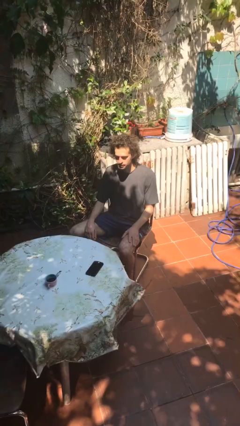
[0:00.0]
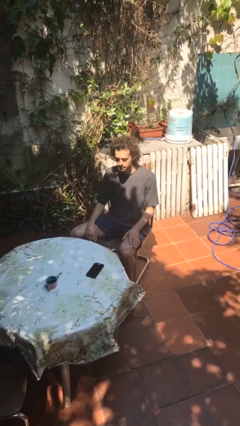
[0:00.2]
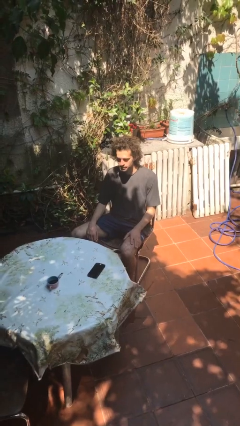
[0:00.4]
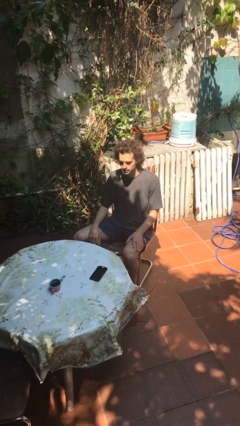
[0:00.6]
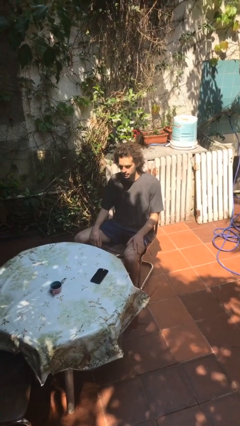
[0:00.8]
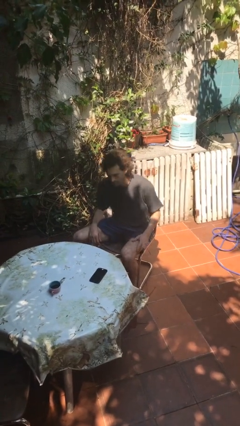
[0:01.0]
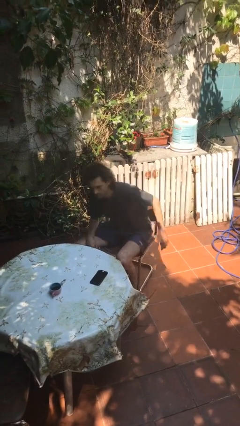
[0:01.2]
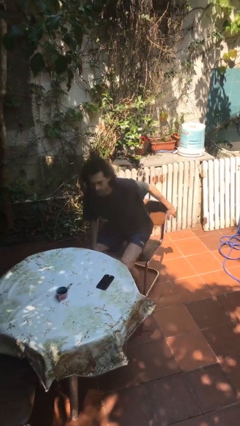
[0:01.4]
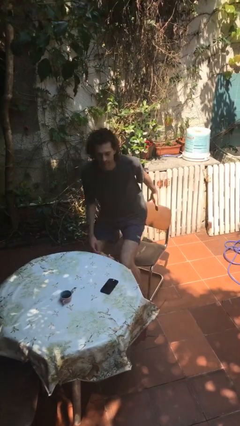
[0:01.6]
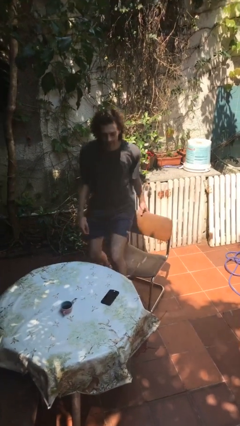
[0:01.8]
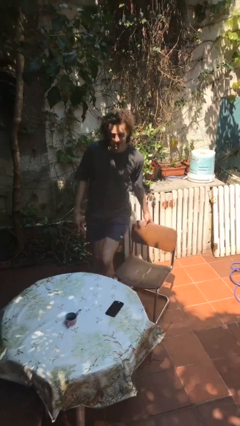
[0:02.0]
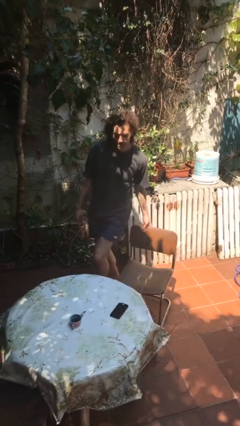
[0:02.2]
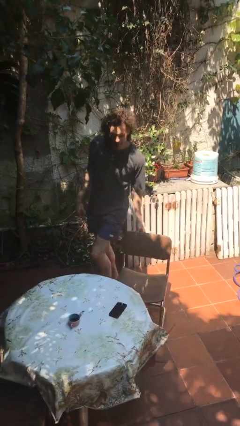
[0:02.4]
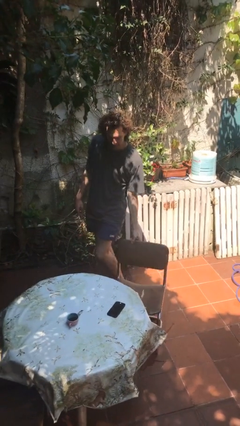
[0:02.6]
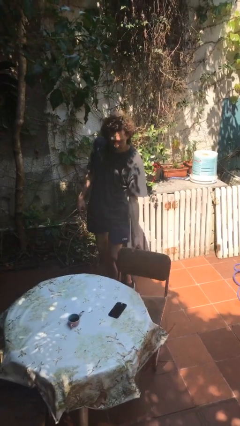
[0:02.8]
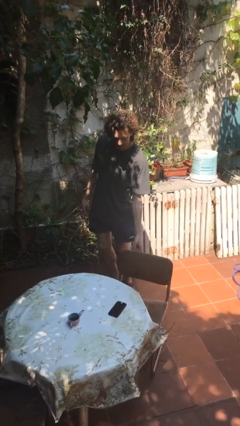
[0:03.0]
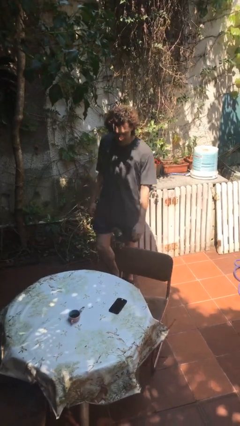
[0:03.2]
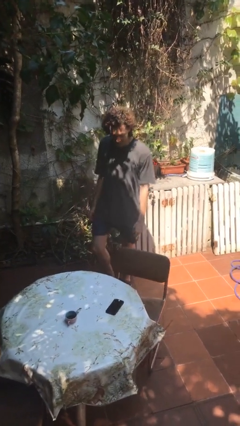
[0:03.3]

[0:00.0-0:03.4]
person stands up

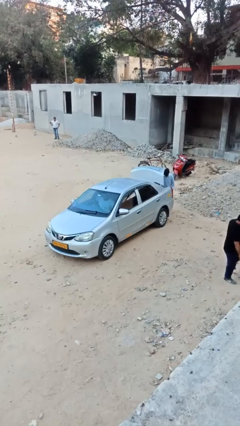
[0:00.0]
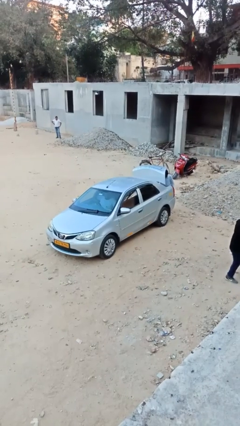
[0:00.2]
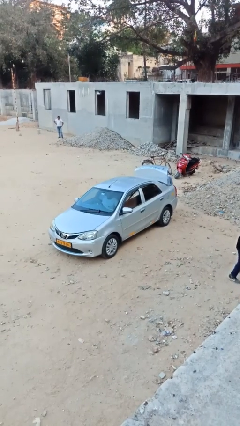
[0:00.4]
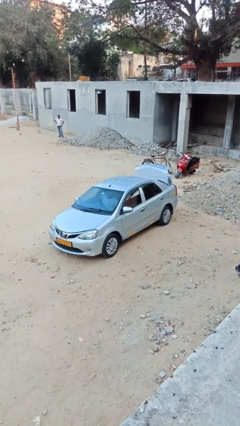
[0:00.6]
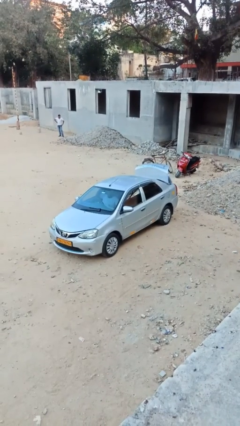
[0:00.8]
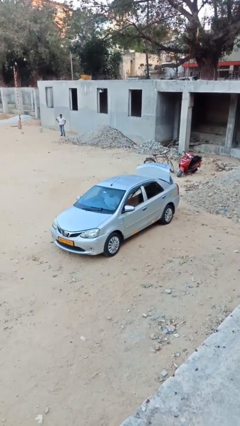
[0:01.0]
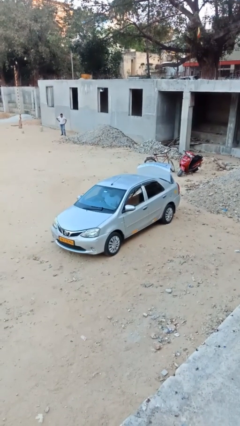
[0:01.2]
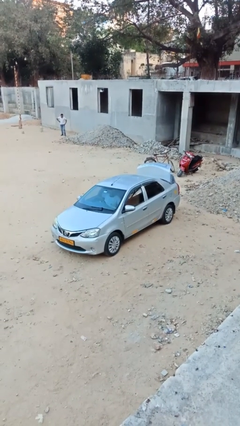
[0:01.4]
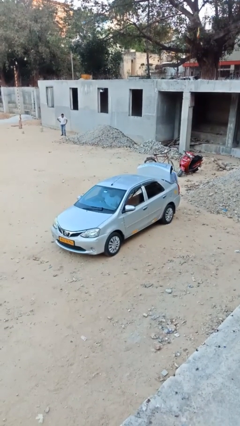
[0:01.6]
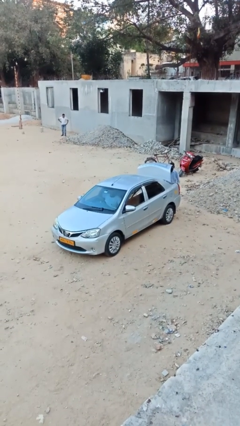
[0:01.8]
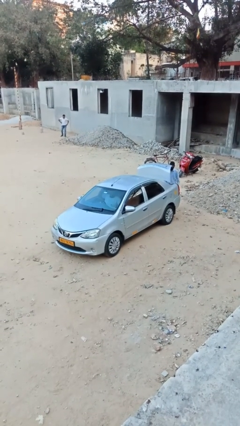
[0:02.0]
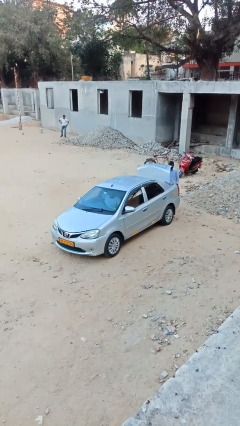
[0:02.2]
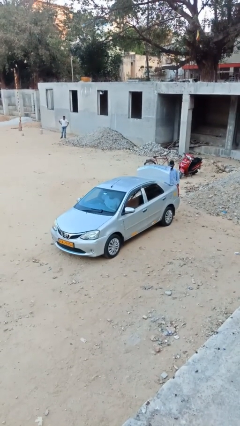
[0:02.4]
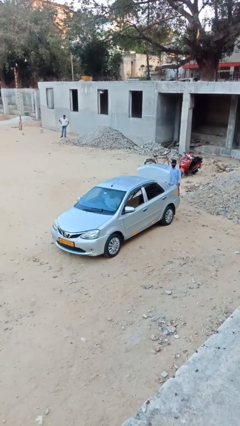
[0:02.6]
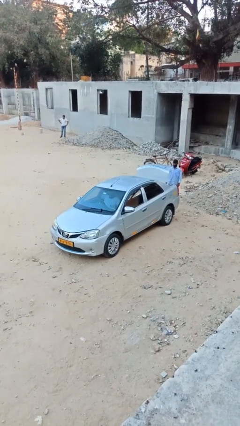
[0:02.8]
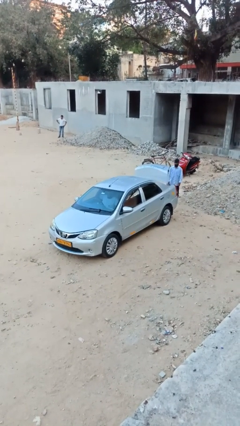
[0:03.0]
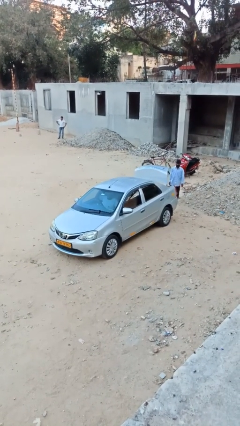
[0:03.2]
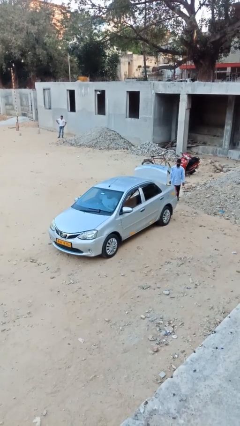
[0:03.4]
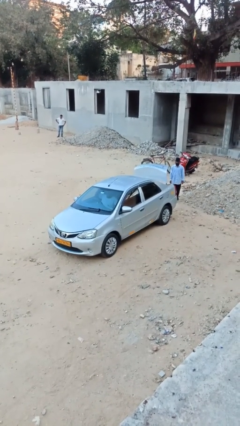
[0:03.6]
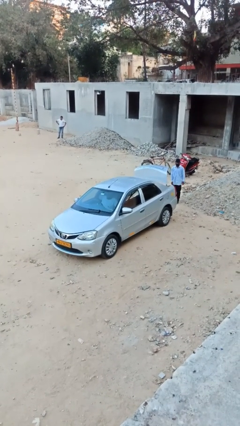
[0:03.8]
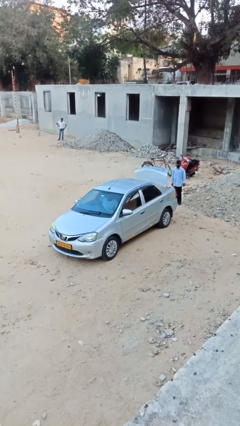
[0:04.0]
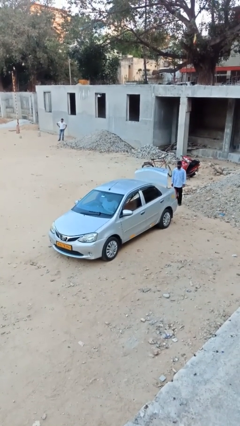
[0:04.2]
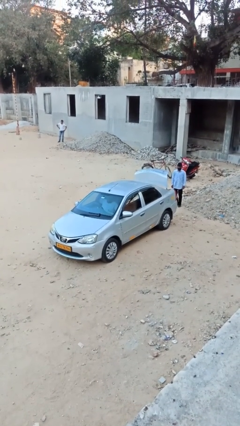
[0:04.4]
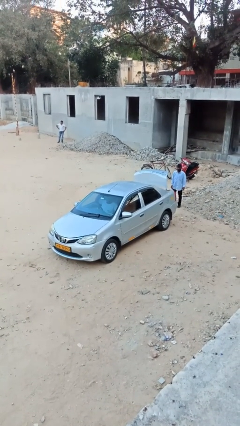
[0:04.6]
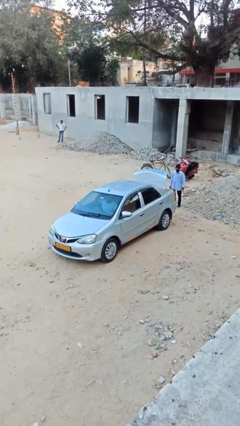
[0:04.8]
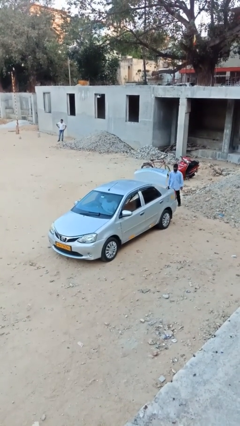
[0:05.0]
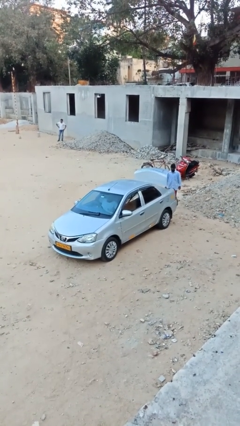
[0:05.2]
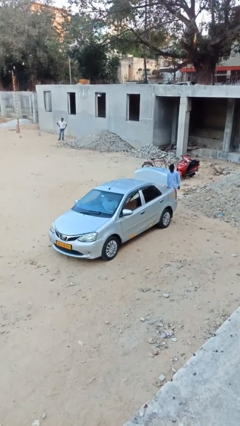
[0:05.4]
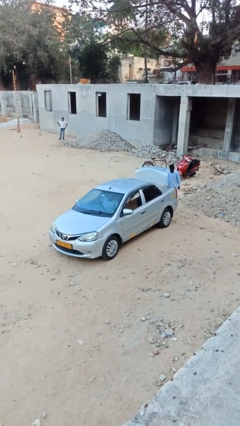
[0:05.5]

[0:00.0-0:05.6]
person loads car

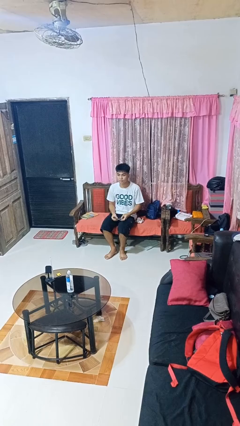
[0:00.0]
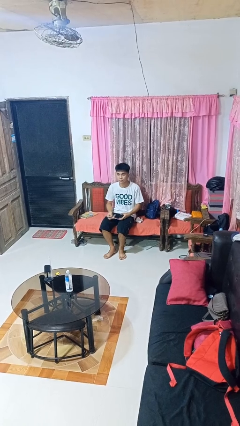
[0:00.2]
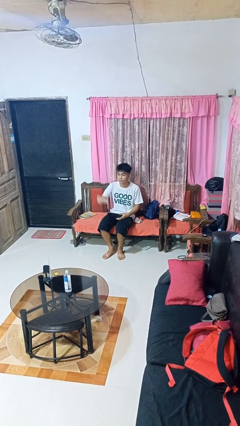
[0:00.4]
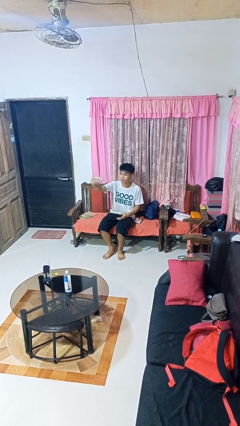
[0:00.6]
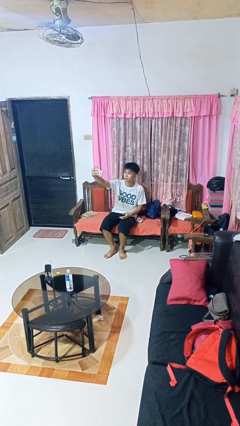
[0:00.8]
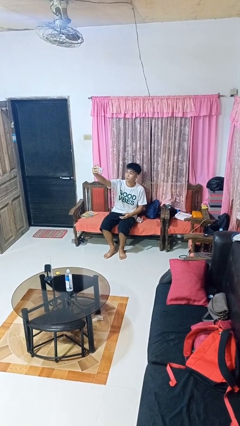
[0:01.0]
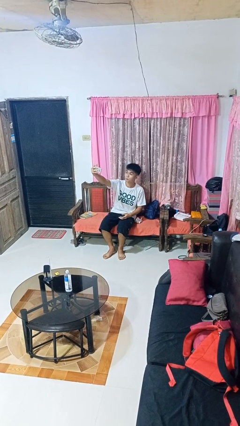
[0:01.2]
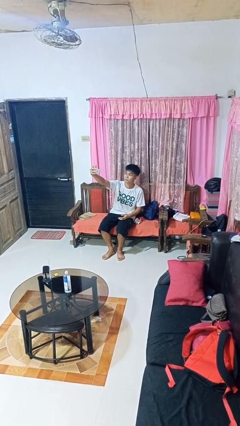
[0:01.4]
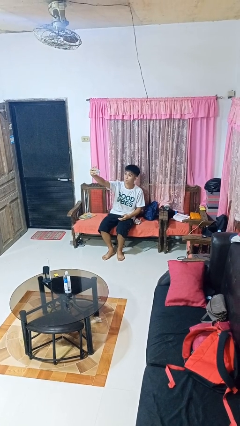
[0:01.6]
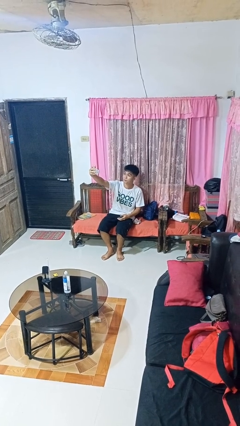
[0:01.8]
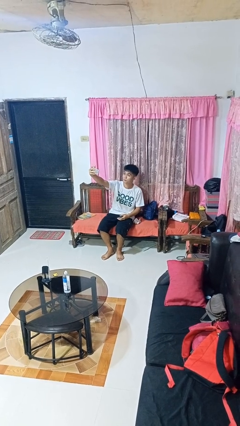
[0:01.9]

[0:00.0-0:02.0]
person takes selfie

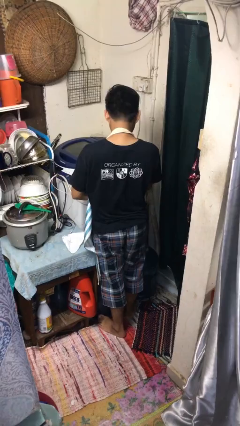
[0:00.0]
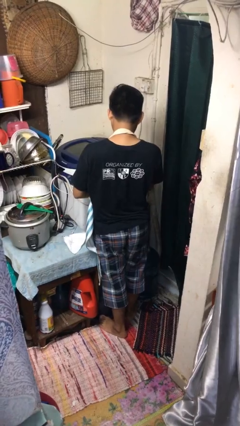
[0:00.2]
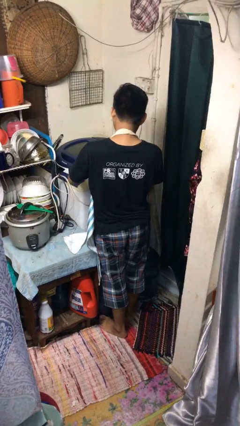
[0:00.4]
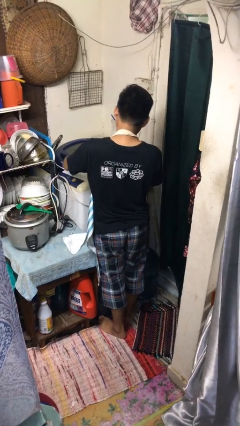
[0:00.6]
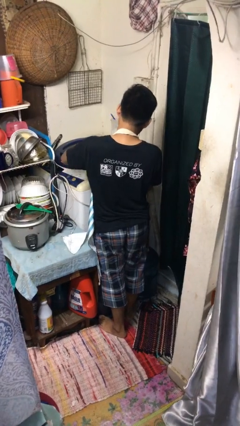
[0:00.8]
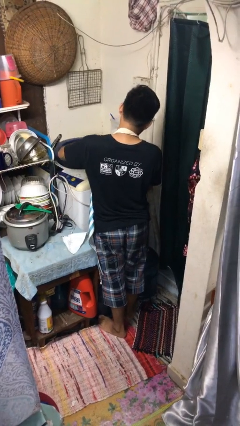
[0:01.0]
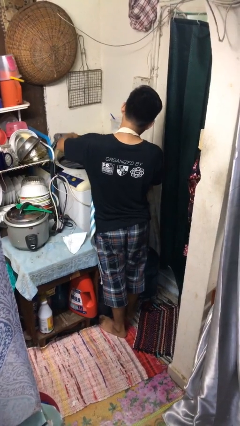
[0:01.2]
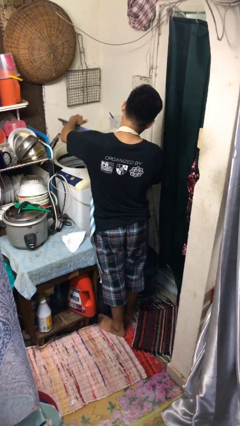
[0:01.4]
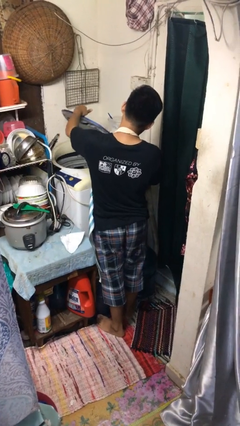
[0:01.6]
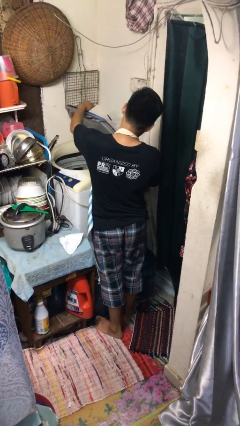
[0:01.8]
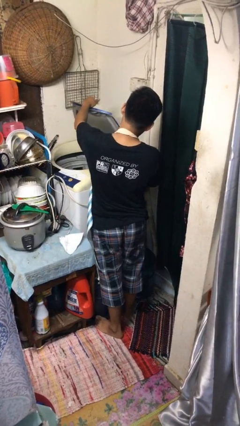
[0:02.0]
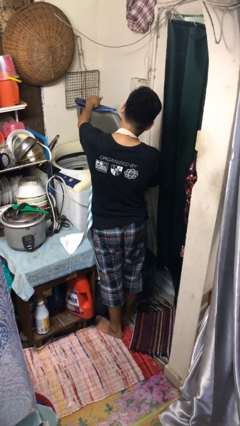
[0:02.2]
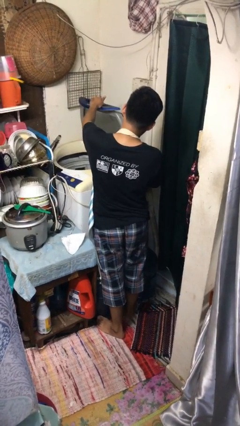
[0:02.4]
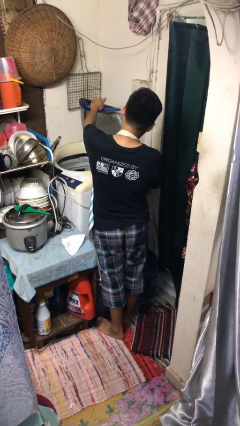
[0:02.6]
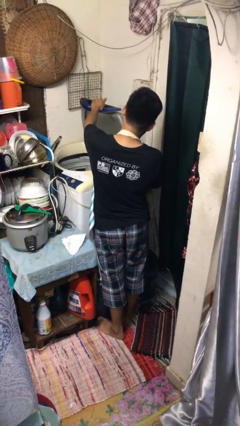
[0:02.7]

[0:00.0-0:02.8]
person opens clothes washer

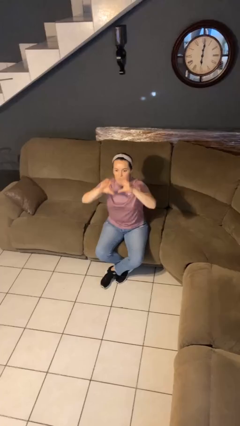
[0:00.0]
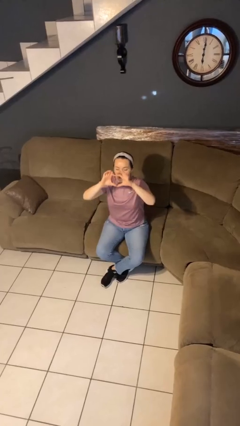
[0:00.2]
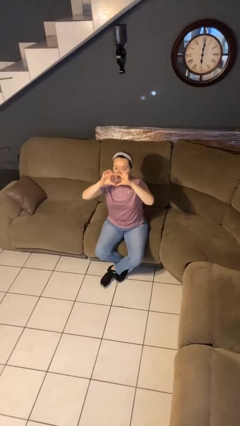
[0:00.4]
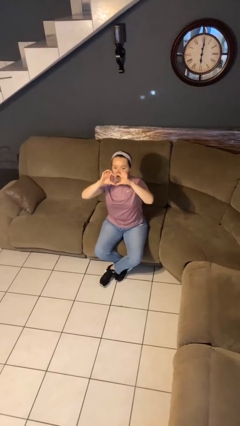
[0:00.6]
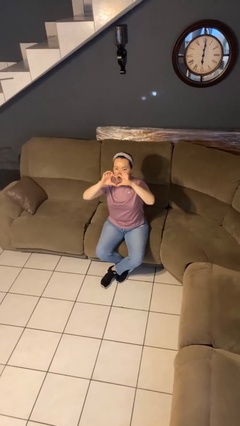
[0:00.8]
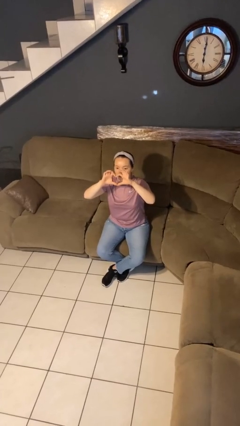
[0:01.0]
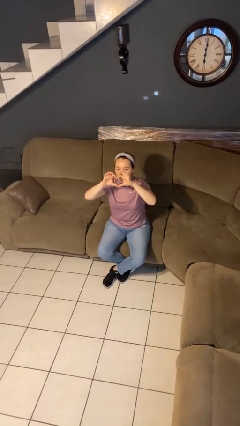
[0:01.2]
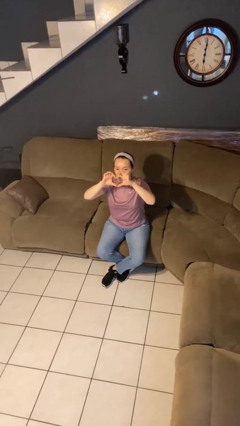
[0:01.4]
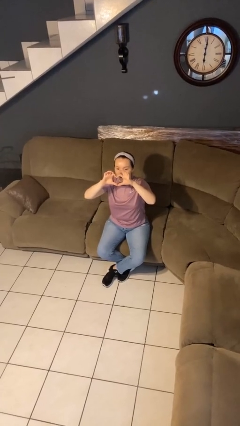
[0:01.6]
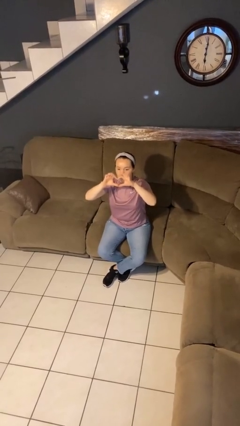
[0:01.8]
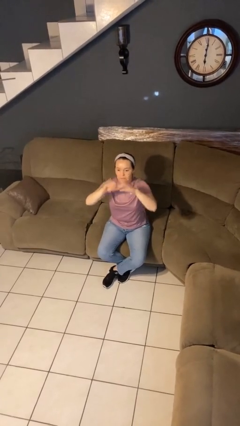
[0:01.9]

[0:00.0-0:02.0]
person gestures heart

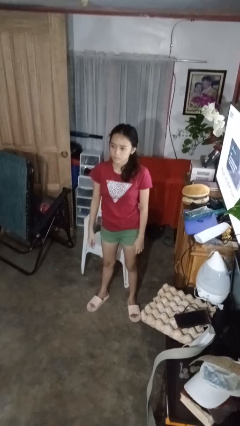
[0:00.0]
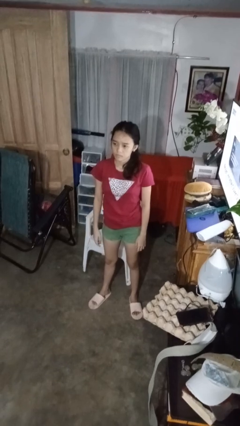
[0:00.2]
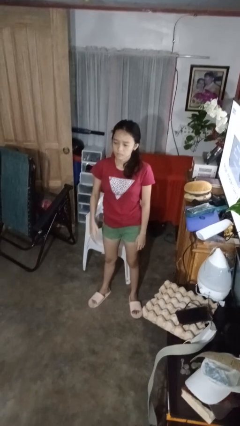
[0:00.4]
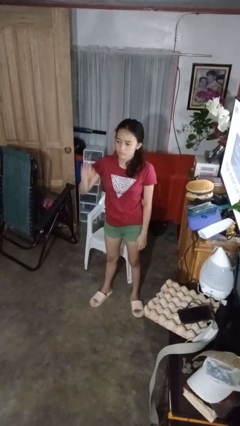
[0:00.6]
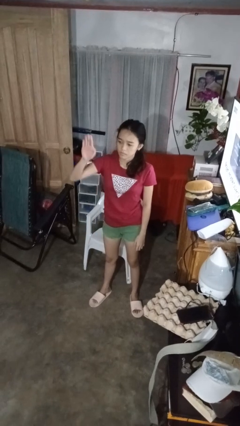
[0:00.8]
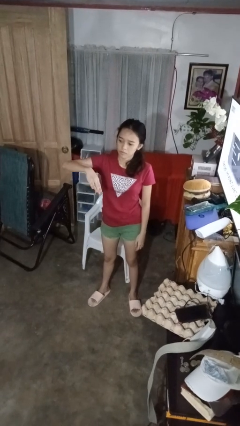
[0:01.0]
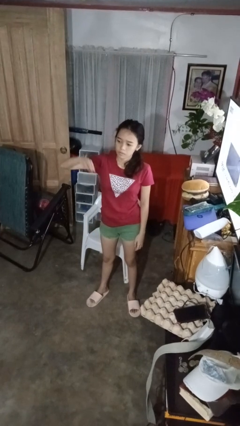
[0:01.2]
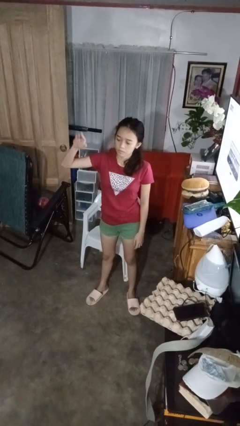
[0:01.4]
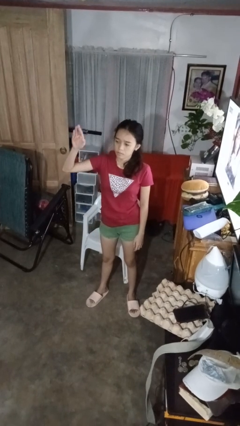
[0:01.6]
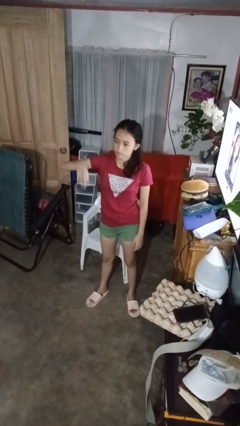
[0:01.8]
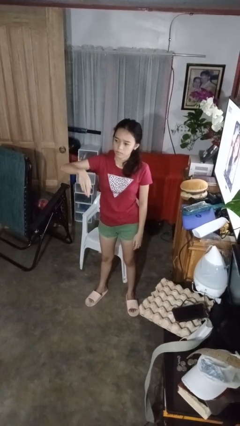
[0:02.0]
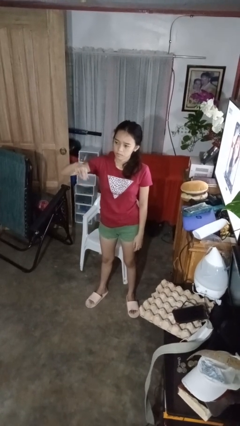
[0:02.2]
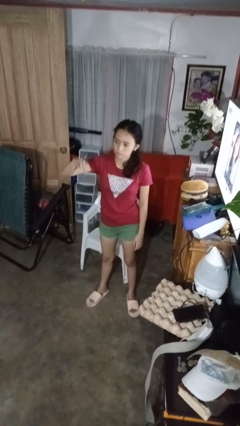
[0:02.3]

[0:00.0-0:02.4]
person gestures swipe down
